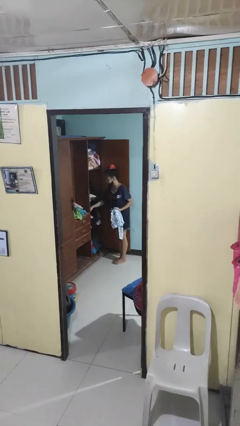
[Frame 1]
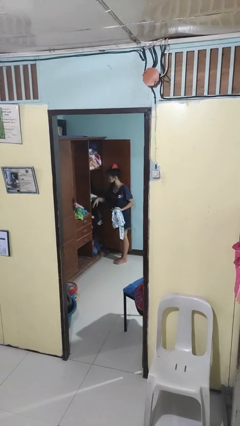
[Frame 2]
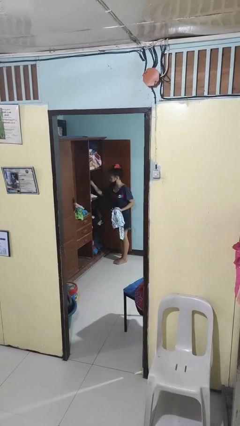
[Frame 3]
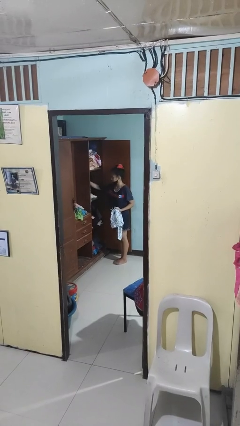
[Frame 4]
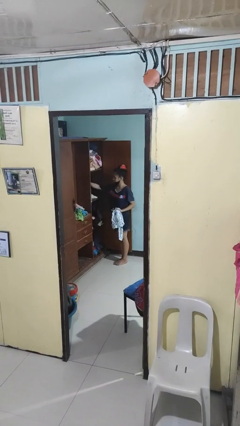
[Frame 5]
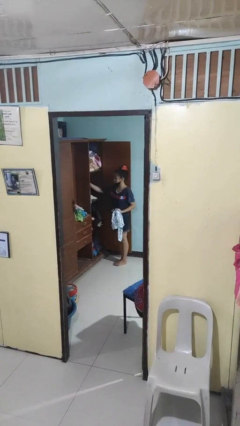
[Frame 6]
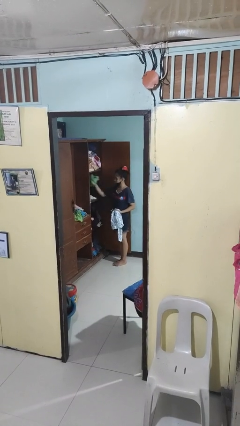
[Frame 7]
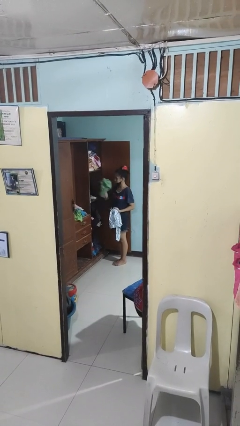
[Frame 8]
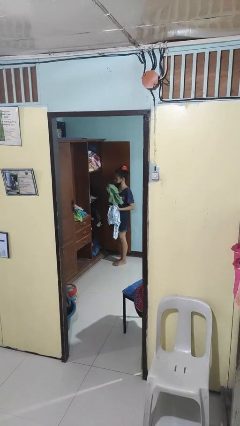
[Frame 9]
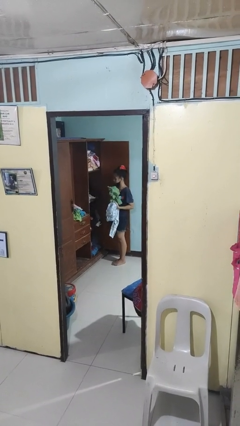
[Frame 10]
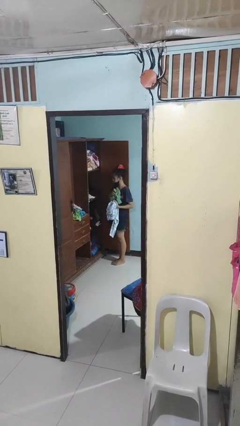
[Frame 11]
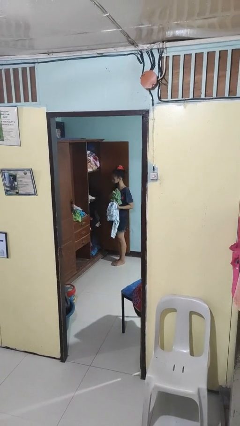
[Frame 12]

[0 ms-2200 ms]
person takes clothes from dresser

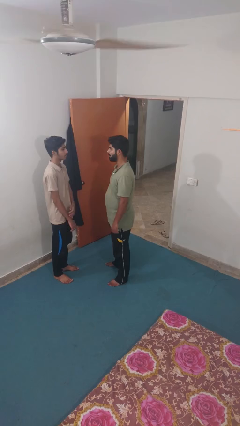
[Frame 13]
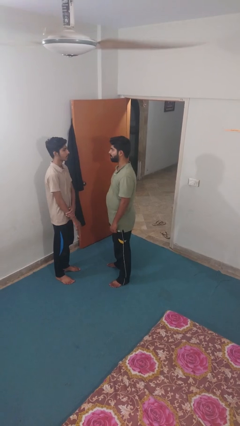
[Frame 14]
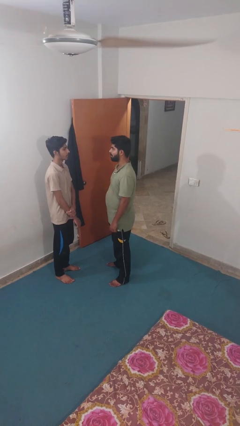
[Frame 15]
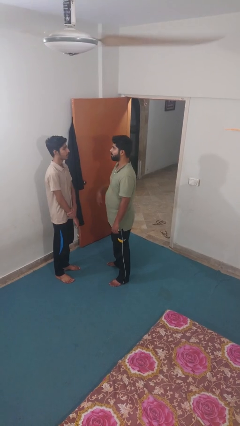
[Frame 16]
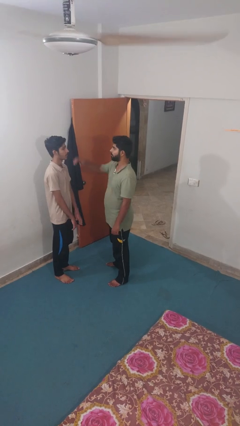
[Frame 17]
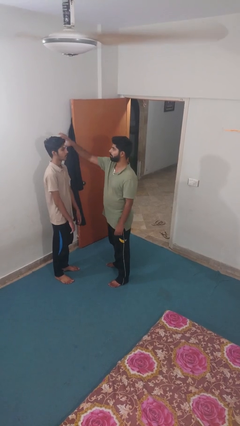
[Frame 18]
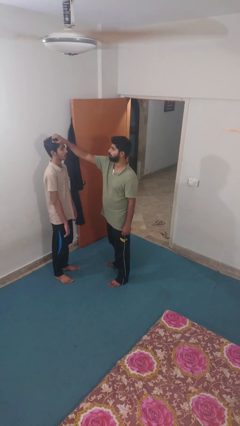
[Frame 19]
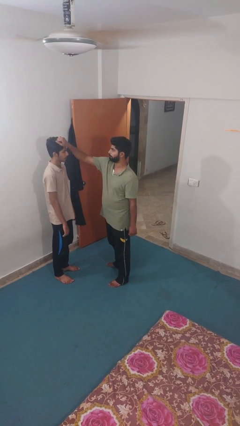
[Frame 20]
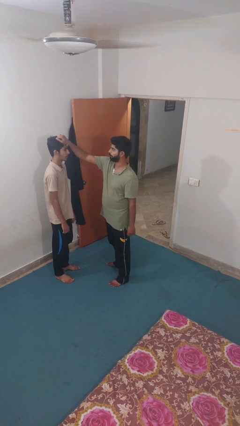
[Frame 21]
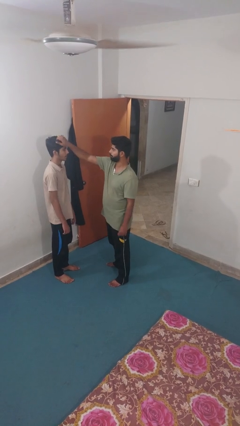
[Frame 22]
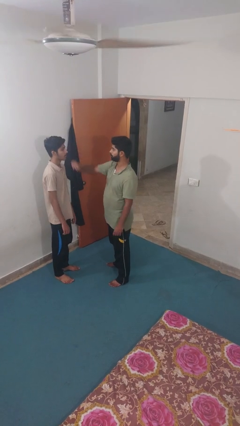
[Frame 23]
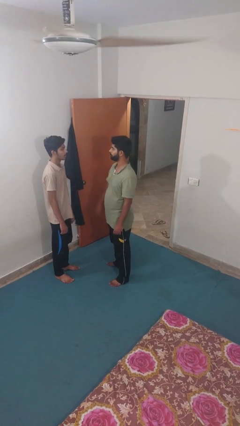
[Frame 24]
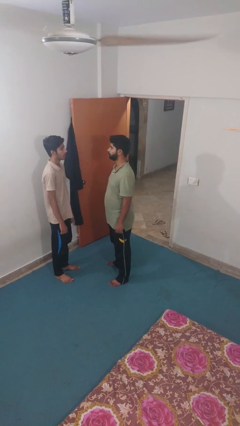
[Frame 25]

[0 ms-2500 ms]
person grabs person by hair

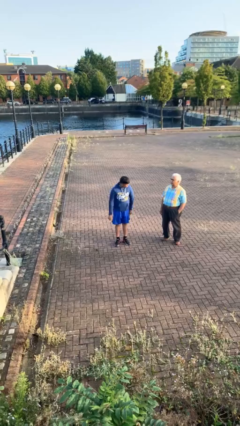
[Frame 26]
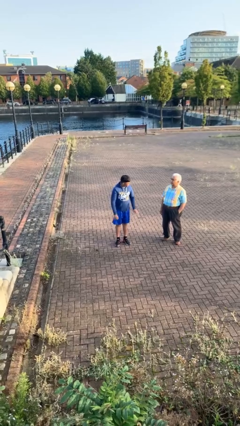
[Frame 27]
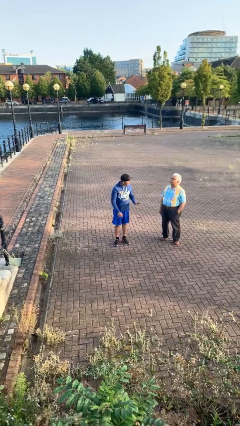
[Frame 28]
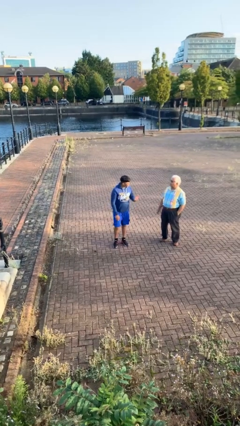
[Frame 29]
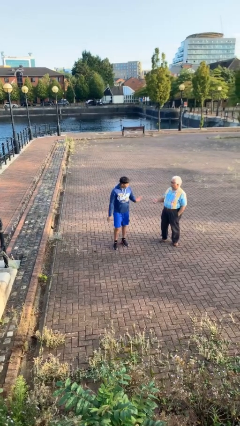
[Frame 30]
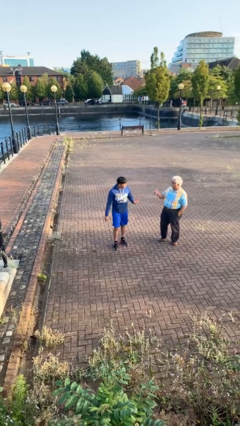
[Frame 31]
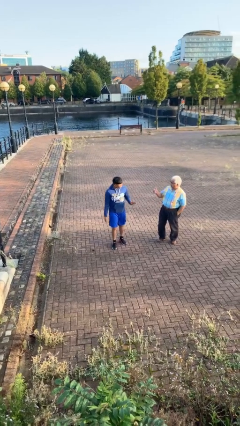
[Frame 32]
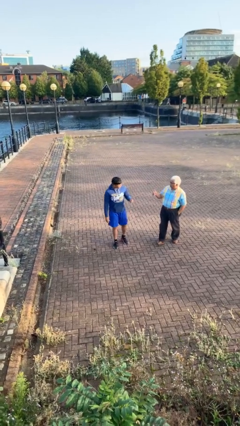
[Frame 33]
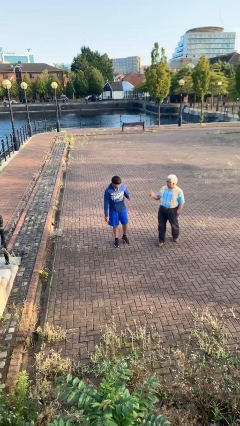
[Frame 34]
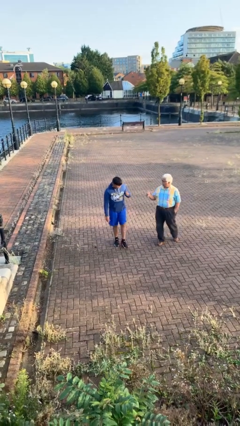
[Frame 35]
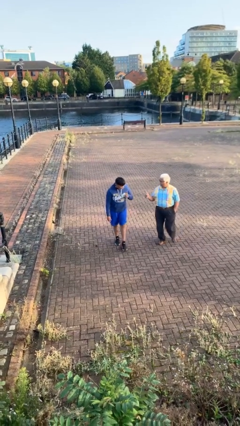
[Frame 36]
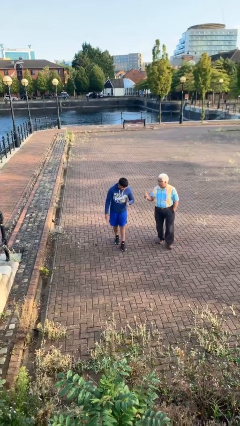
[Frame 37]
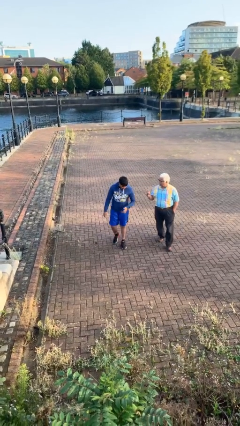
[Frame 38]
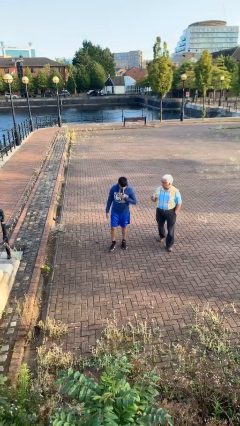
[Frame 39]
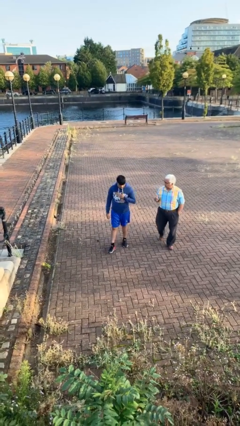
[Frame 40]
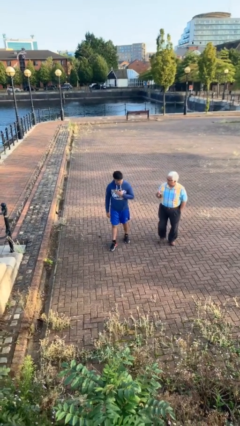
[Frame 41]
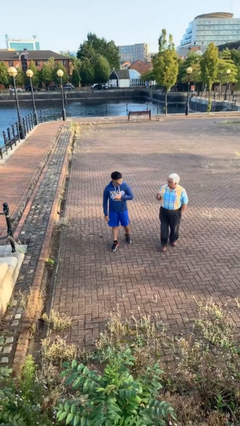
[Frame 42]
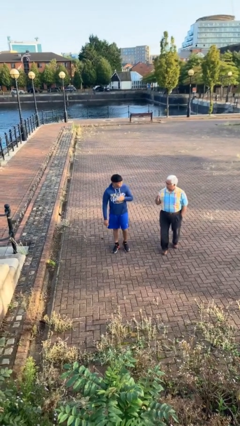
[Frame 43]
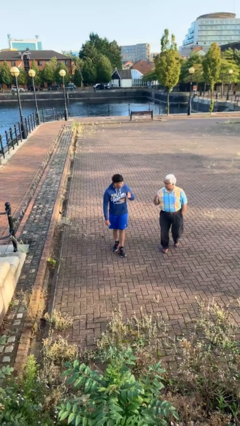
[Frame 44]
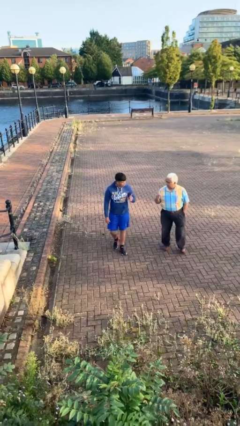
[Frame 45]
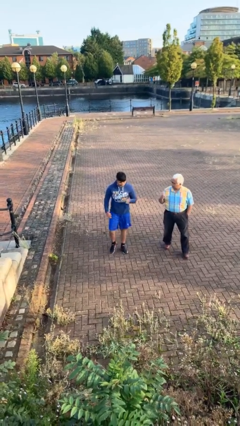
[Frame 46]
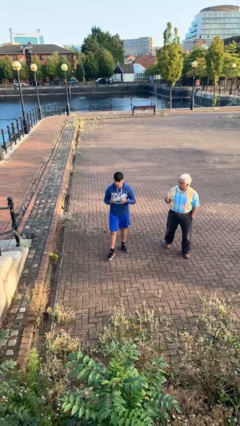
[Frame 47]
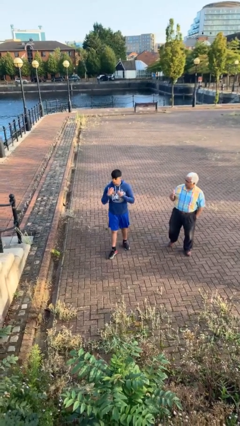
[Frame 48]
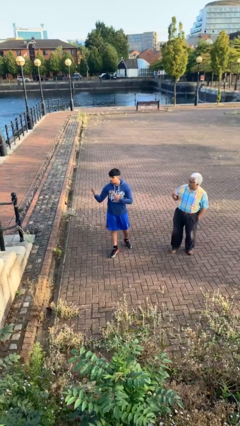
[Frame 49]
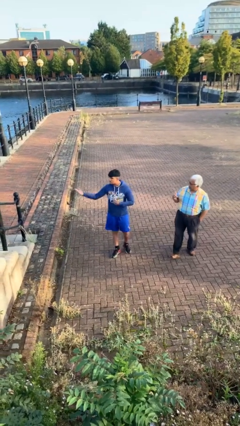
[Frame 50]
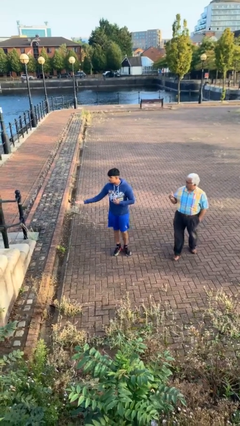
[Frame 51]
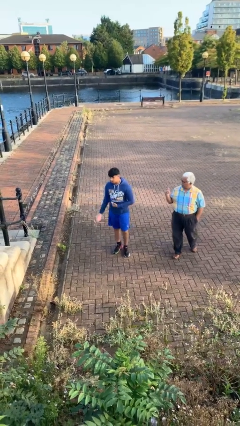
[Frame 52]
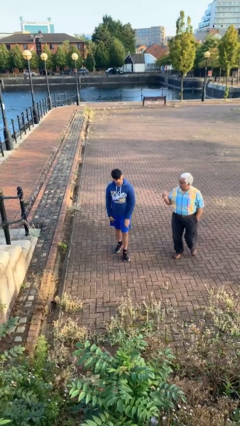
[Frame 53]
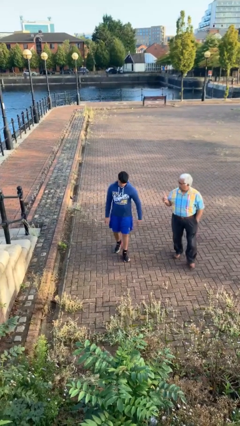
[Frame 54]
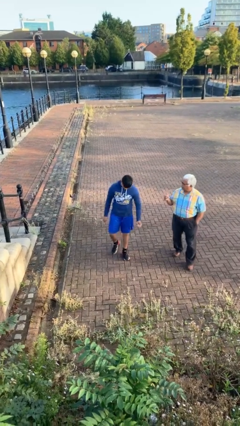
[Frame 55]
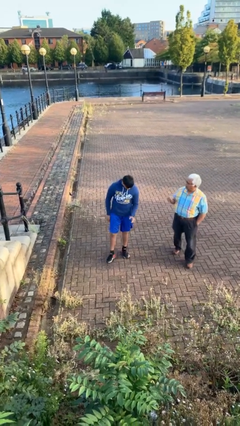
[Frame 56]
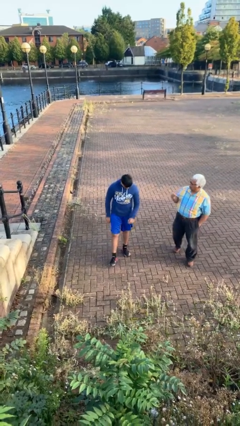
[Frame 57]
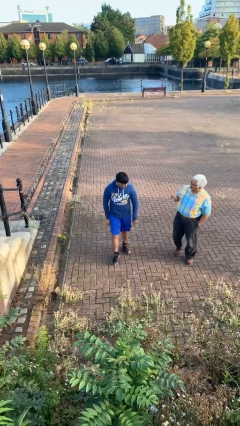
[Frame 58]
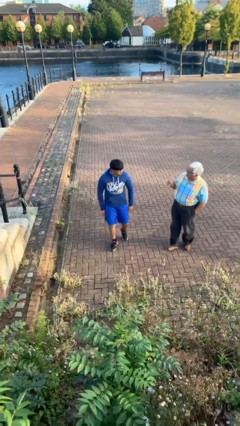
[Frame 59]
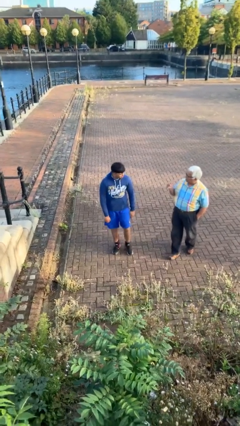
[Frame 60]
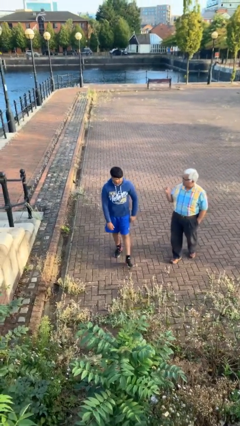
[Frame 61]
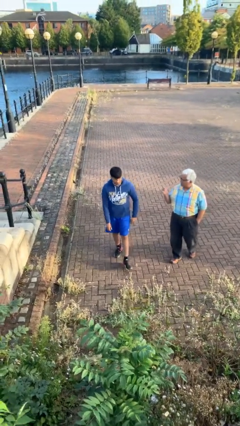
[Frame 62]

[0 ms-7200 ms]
person talks to person

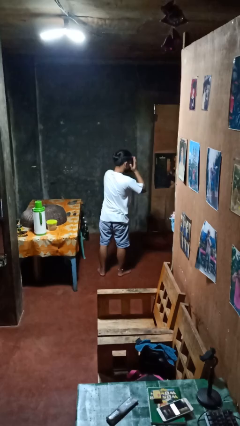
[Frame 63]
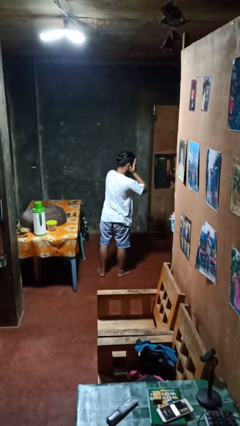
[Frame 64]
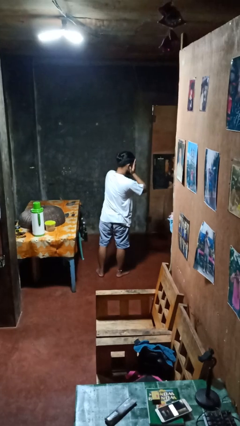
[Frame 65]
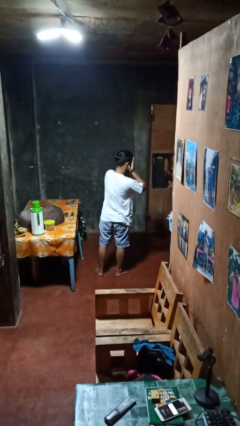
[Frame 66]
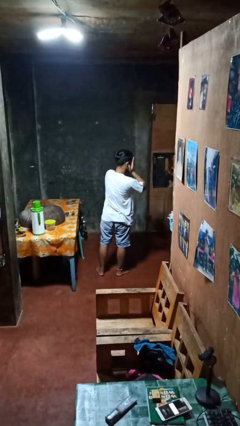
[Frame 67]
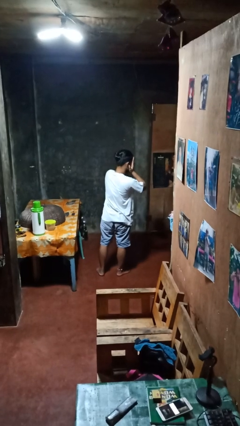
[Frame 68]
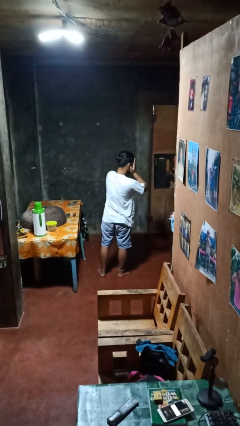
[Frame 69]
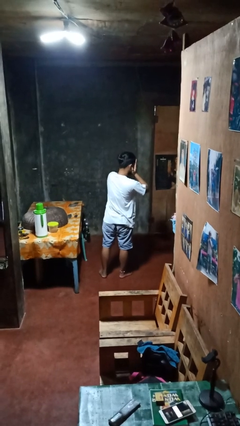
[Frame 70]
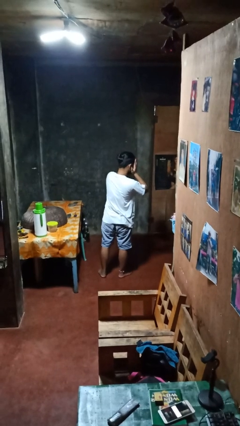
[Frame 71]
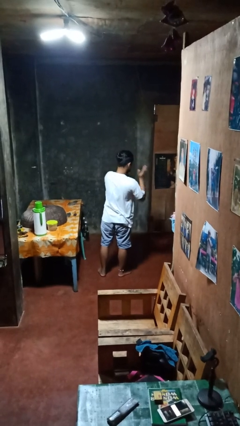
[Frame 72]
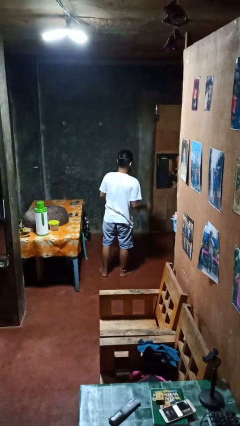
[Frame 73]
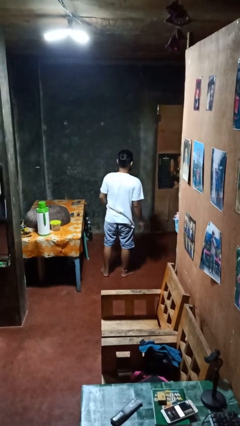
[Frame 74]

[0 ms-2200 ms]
person covers face with hands

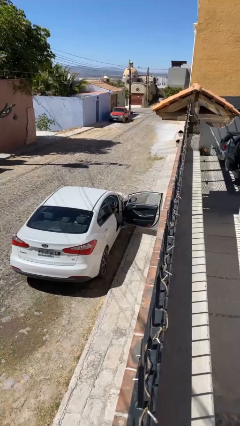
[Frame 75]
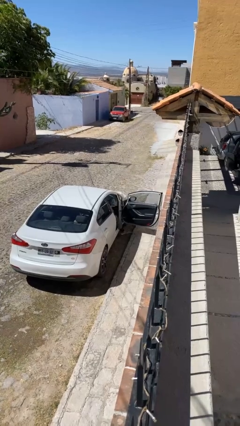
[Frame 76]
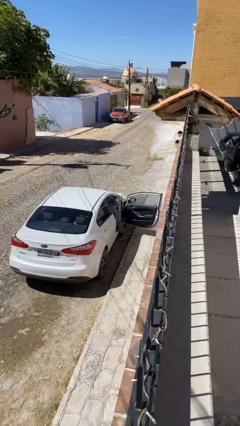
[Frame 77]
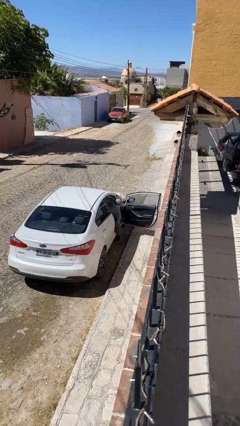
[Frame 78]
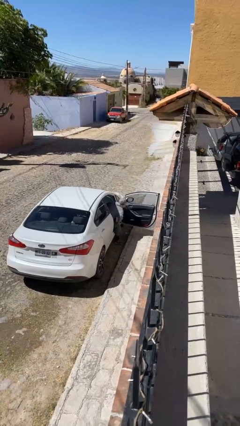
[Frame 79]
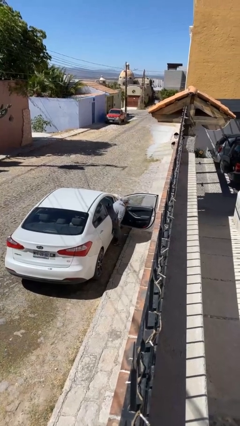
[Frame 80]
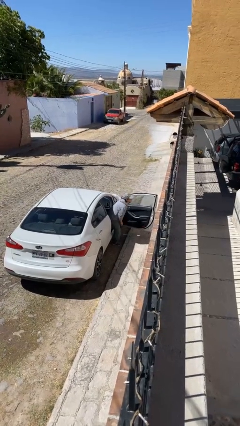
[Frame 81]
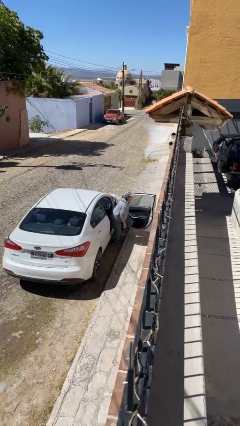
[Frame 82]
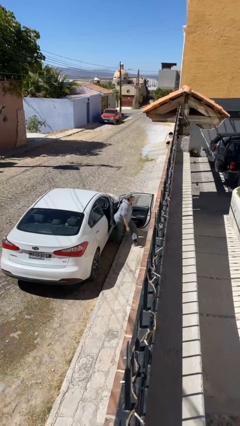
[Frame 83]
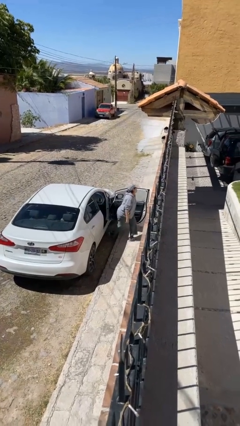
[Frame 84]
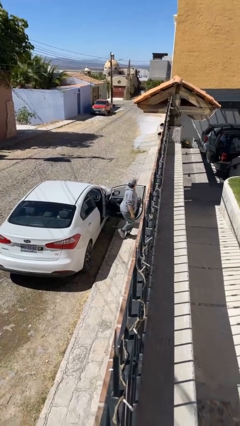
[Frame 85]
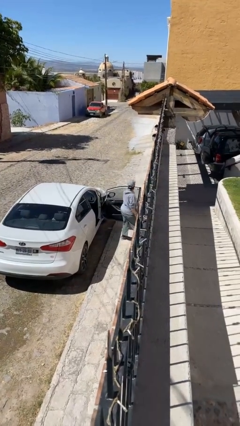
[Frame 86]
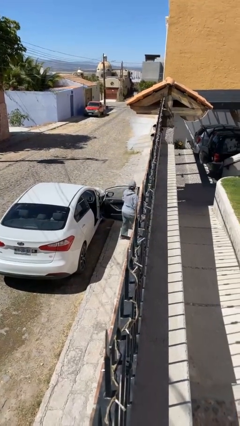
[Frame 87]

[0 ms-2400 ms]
person exits car

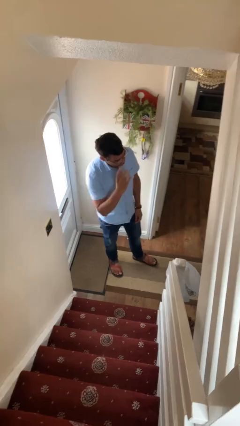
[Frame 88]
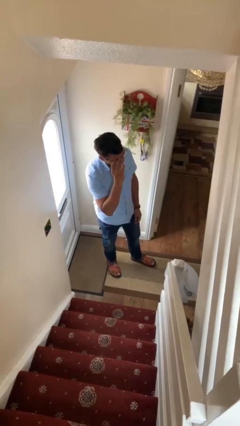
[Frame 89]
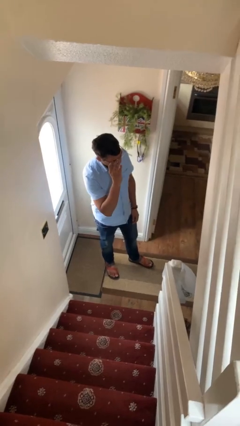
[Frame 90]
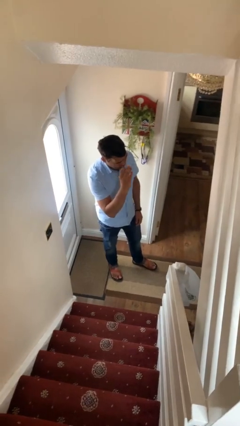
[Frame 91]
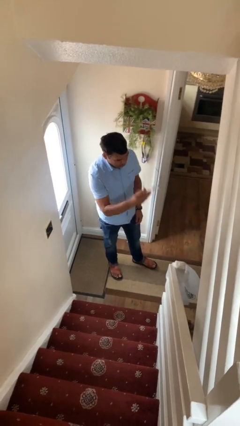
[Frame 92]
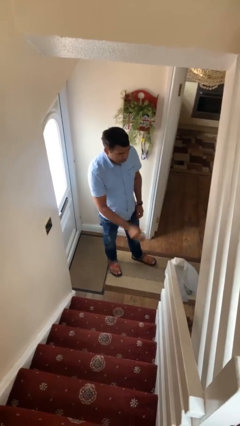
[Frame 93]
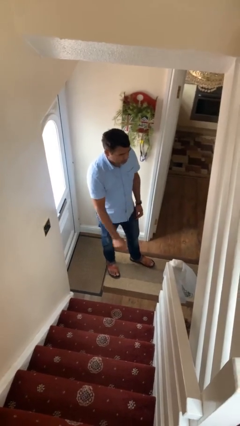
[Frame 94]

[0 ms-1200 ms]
person takes off glasses
